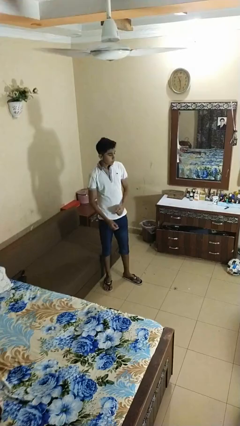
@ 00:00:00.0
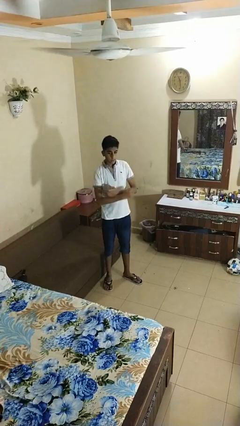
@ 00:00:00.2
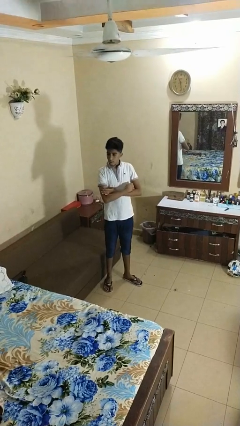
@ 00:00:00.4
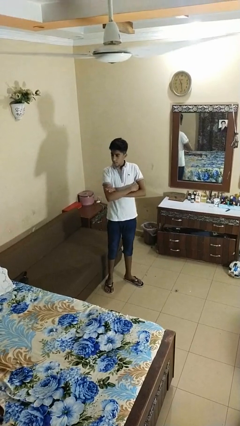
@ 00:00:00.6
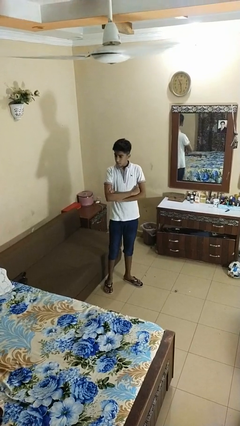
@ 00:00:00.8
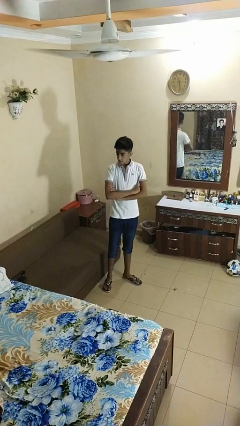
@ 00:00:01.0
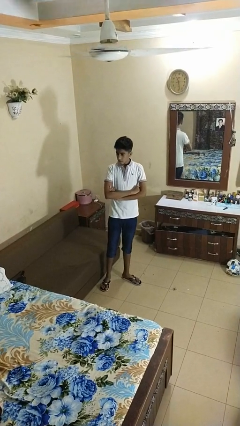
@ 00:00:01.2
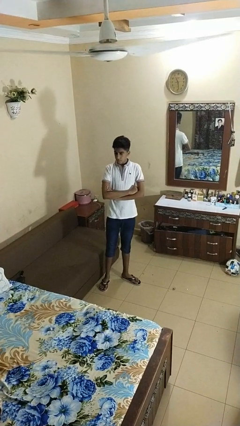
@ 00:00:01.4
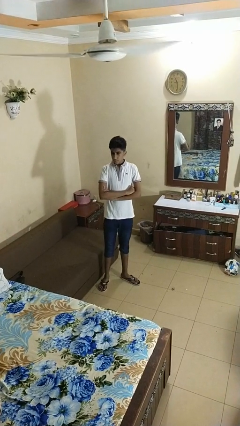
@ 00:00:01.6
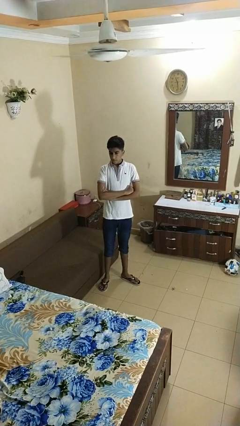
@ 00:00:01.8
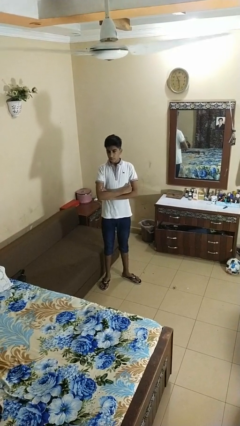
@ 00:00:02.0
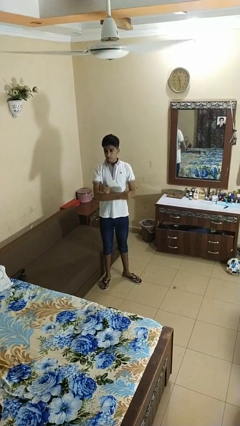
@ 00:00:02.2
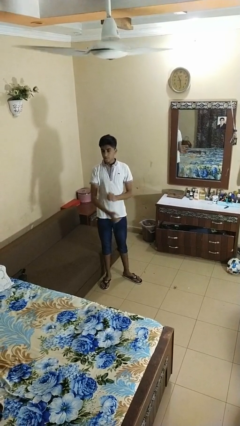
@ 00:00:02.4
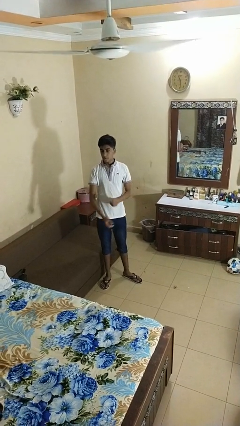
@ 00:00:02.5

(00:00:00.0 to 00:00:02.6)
person crosses arms

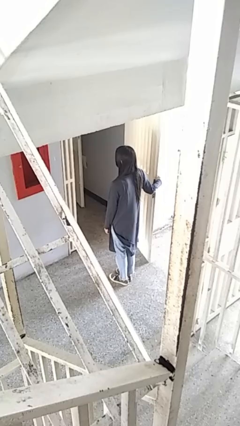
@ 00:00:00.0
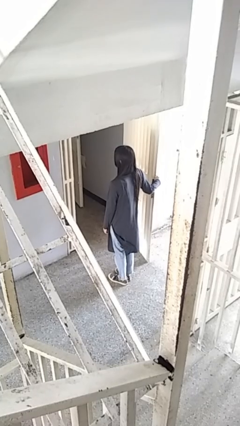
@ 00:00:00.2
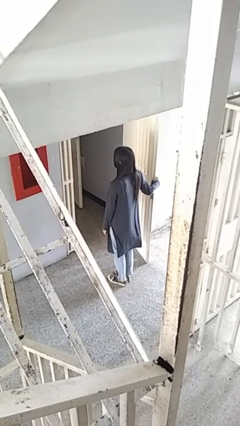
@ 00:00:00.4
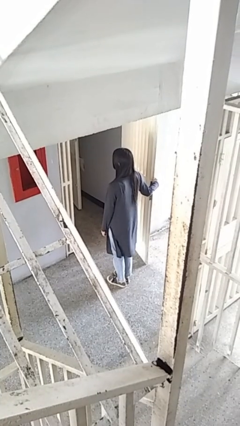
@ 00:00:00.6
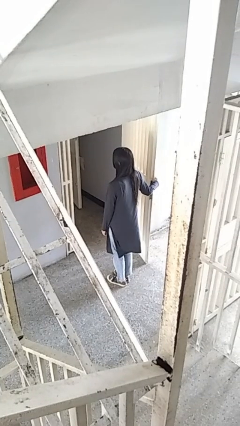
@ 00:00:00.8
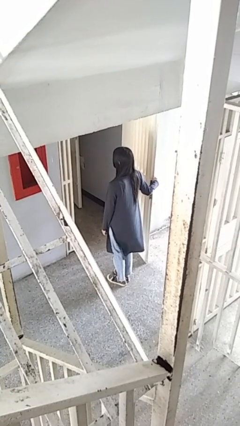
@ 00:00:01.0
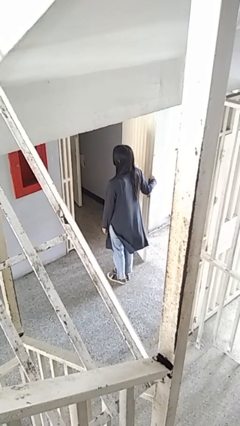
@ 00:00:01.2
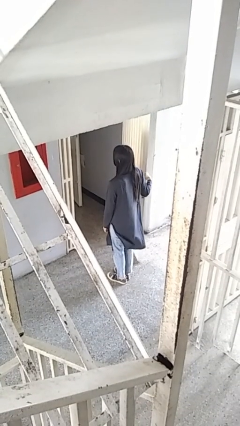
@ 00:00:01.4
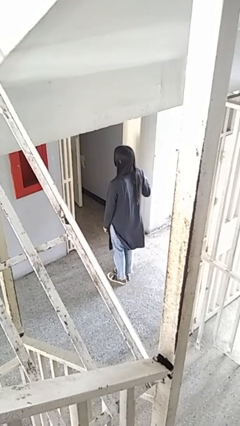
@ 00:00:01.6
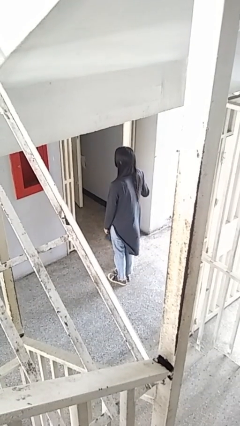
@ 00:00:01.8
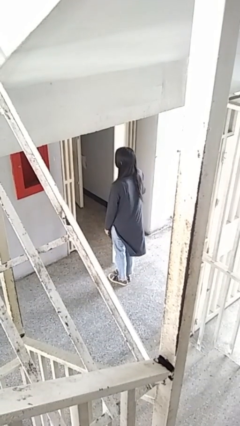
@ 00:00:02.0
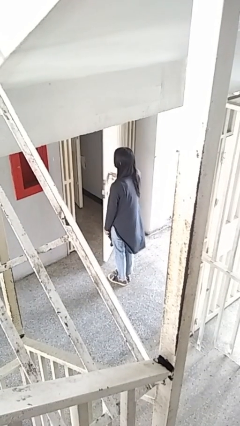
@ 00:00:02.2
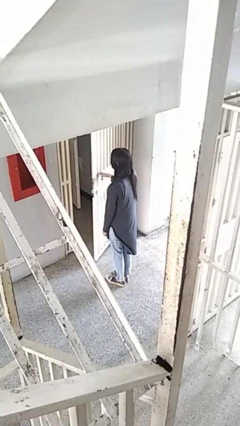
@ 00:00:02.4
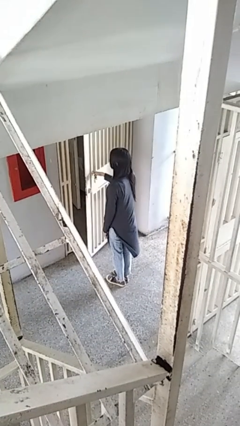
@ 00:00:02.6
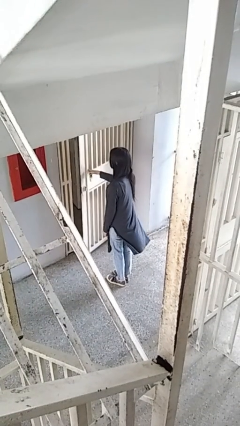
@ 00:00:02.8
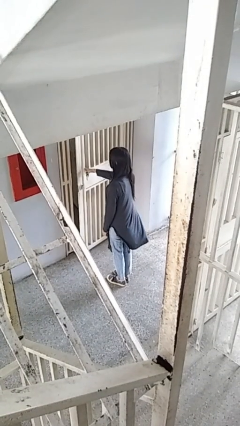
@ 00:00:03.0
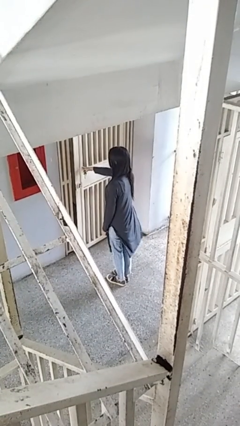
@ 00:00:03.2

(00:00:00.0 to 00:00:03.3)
person closes gate

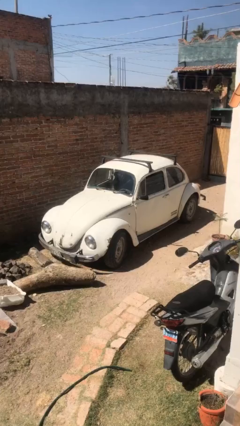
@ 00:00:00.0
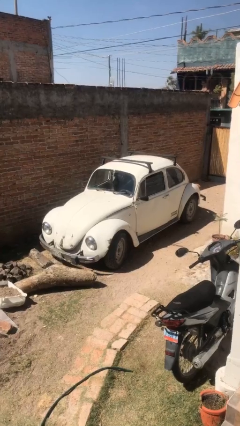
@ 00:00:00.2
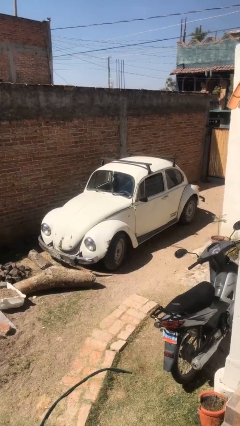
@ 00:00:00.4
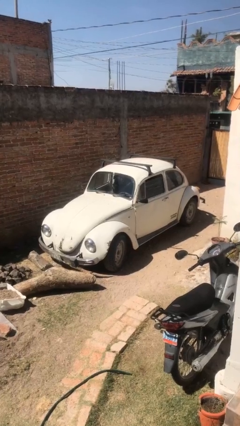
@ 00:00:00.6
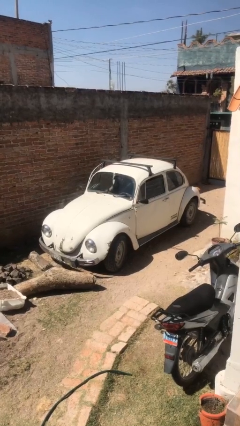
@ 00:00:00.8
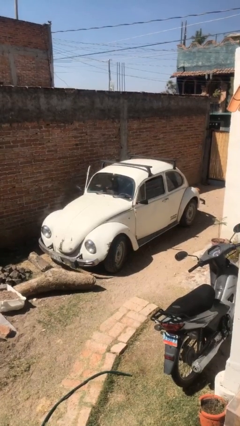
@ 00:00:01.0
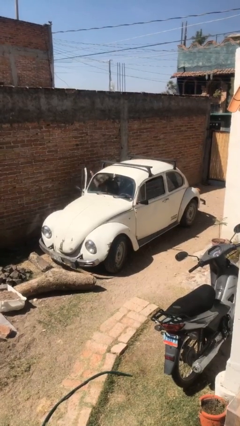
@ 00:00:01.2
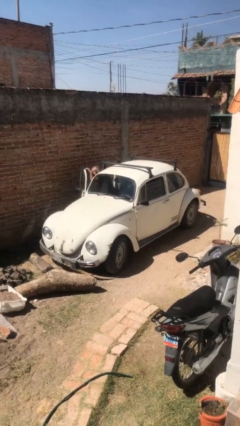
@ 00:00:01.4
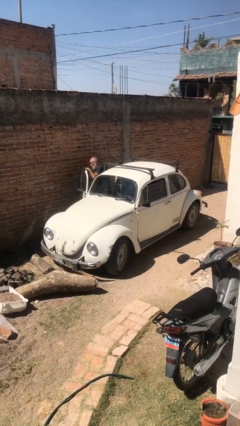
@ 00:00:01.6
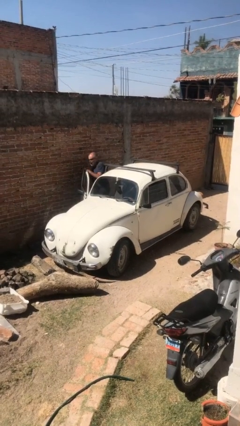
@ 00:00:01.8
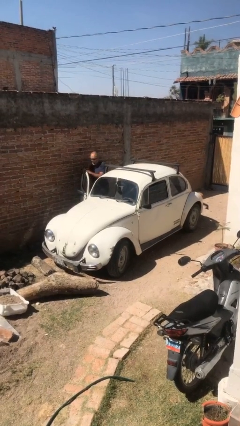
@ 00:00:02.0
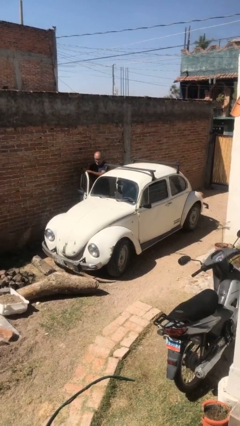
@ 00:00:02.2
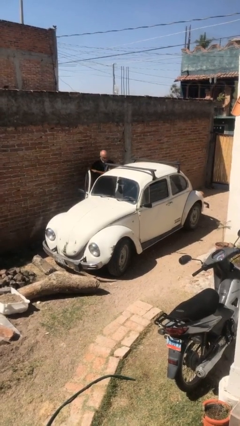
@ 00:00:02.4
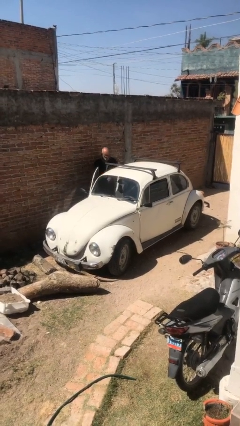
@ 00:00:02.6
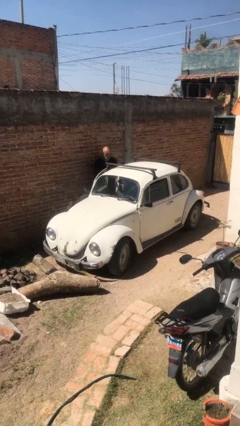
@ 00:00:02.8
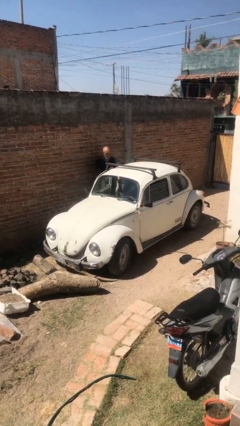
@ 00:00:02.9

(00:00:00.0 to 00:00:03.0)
car drops off person

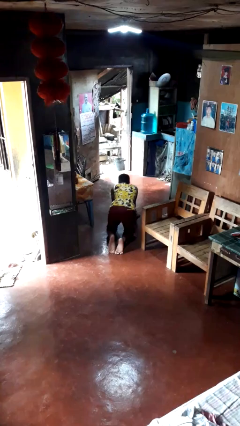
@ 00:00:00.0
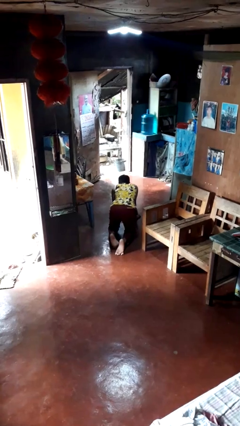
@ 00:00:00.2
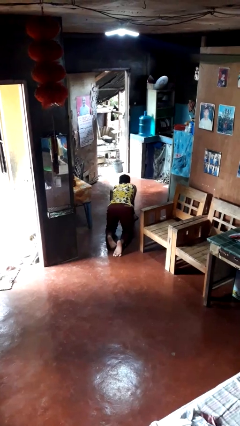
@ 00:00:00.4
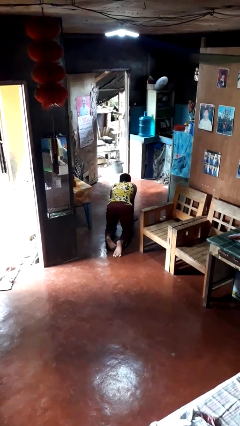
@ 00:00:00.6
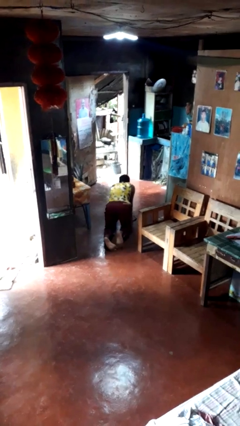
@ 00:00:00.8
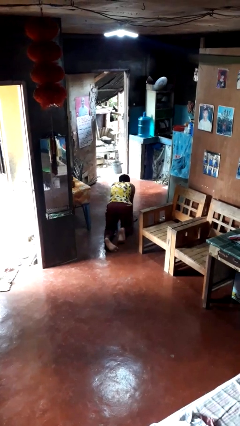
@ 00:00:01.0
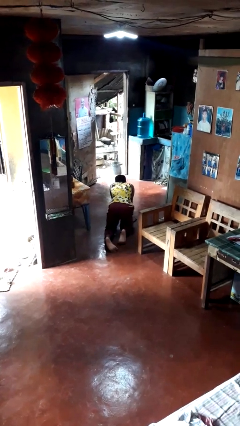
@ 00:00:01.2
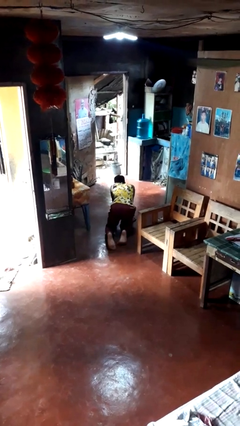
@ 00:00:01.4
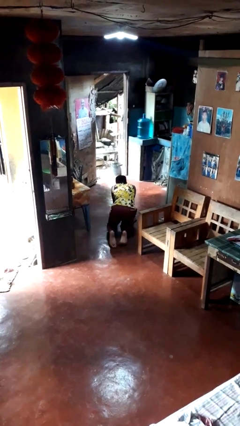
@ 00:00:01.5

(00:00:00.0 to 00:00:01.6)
person crawls

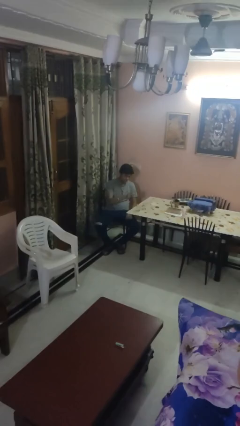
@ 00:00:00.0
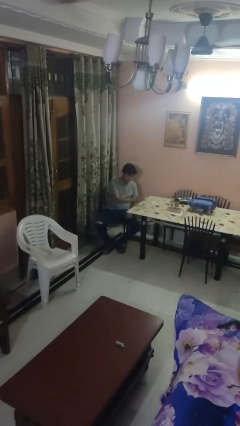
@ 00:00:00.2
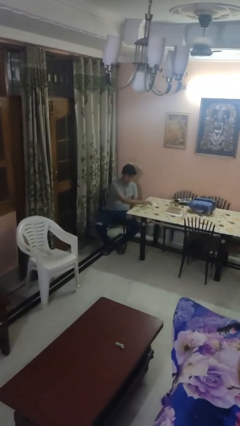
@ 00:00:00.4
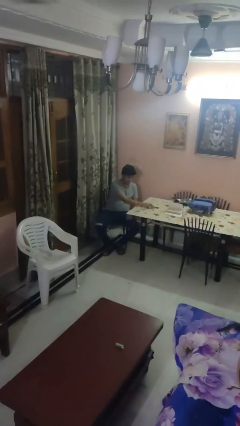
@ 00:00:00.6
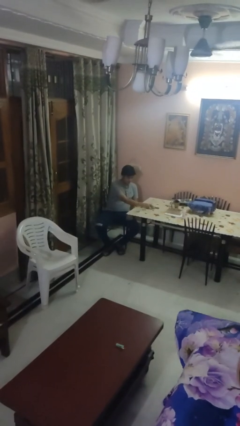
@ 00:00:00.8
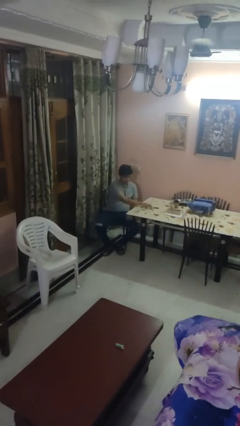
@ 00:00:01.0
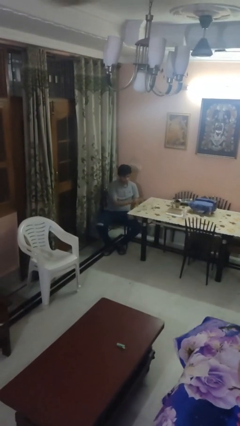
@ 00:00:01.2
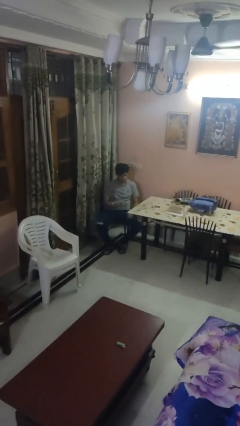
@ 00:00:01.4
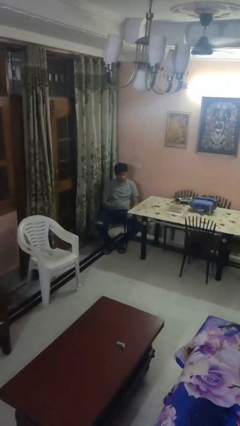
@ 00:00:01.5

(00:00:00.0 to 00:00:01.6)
person puts down object on table

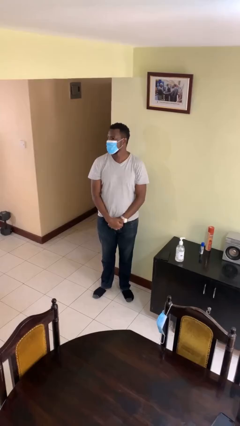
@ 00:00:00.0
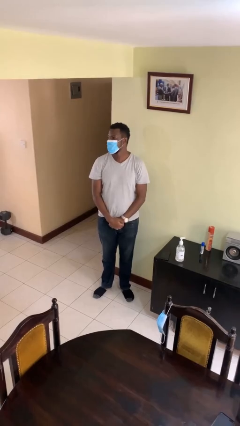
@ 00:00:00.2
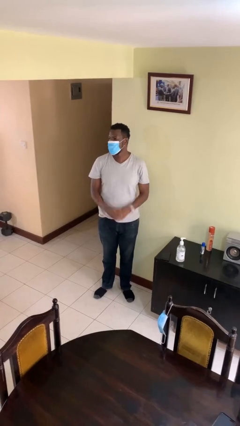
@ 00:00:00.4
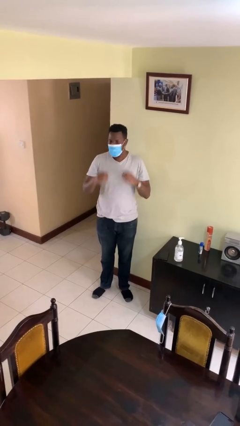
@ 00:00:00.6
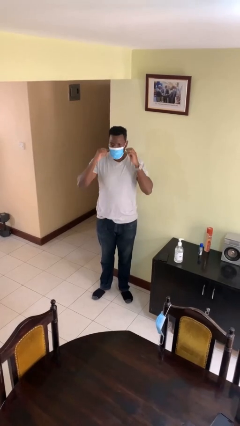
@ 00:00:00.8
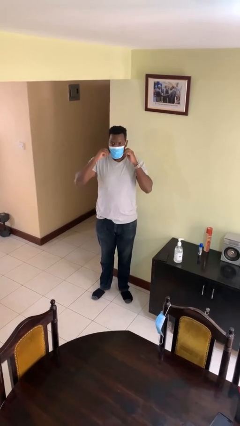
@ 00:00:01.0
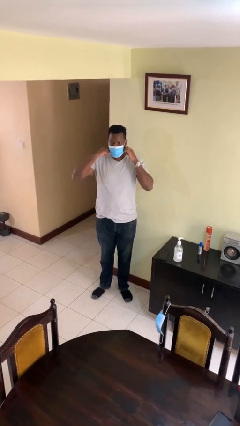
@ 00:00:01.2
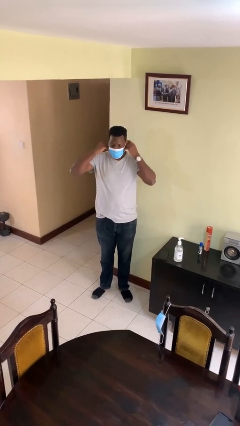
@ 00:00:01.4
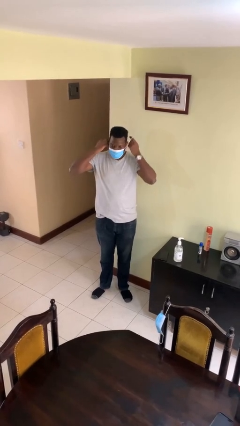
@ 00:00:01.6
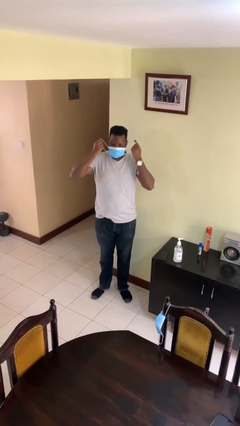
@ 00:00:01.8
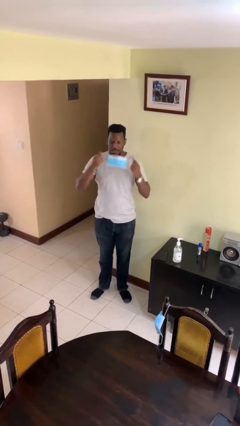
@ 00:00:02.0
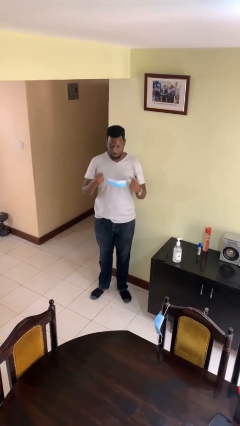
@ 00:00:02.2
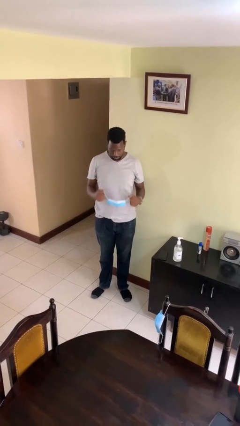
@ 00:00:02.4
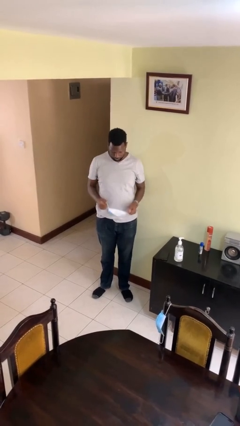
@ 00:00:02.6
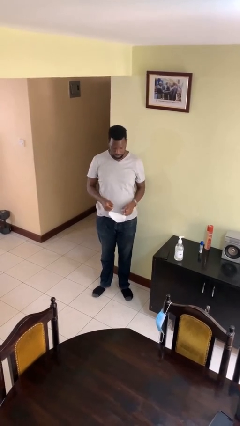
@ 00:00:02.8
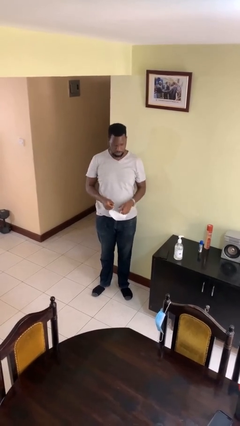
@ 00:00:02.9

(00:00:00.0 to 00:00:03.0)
person takes off facemask

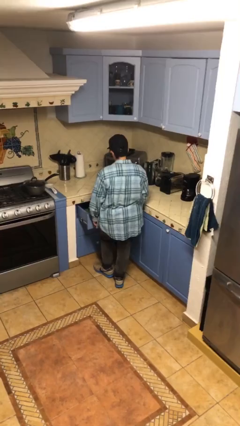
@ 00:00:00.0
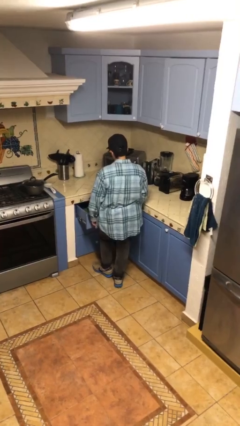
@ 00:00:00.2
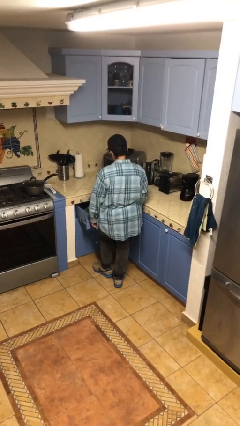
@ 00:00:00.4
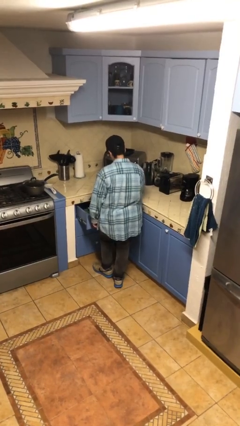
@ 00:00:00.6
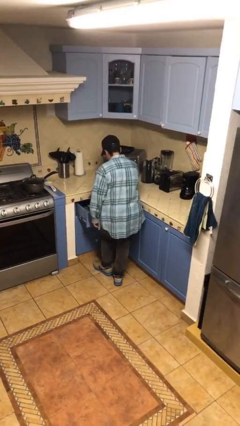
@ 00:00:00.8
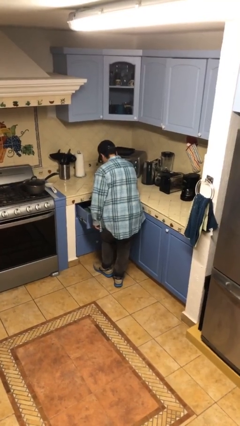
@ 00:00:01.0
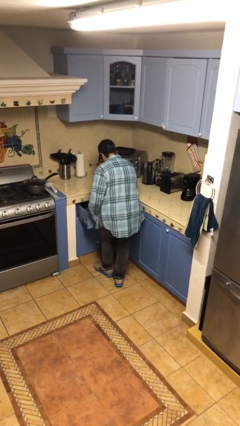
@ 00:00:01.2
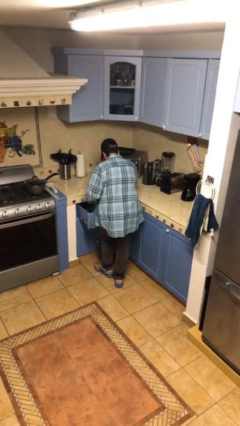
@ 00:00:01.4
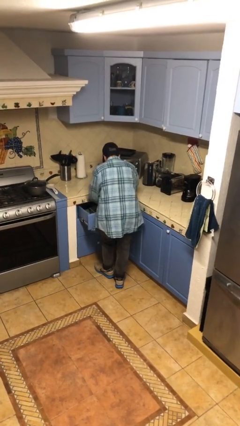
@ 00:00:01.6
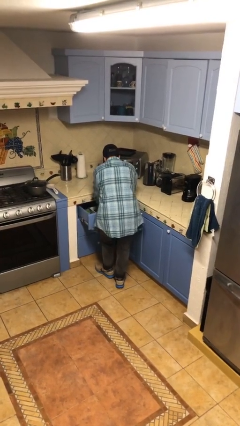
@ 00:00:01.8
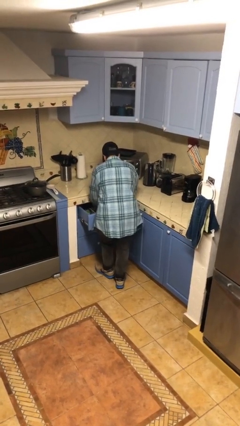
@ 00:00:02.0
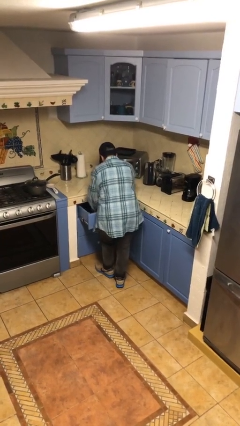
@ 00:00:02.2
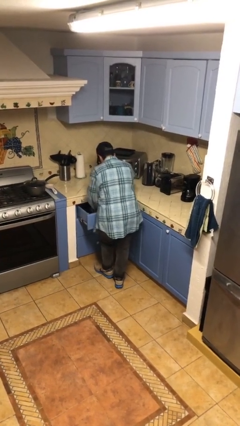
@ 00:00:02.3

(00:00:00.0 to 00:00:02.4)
person searches in kitchen drawer
